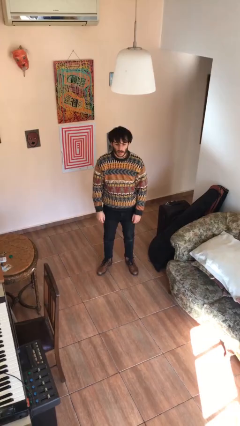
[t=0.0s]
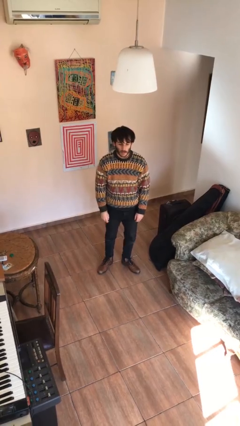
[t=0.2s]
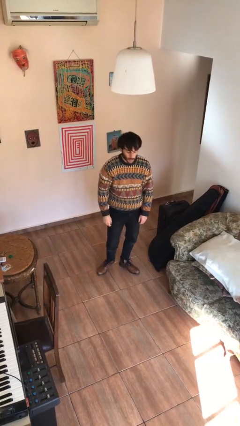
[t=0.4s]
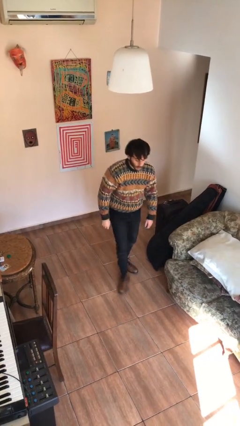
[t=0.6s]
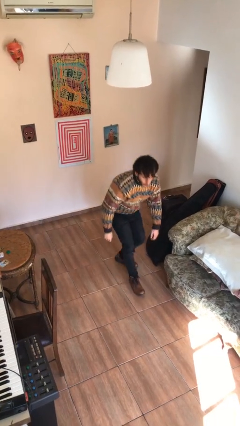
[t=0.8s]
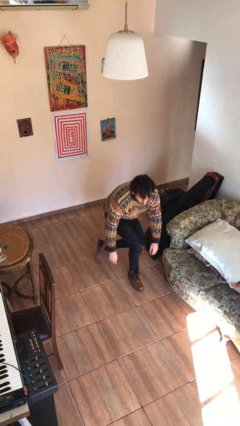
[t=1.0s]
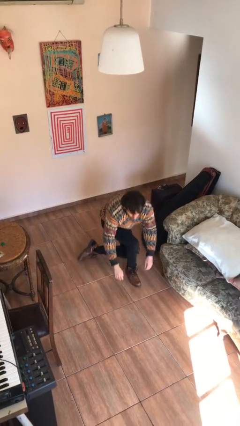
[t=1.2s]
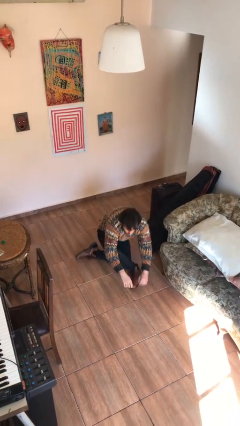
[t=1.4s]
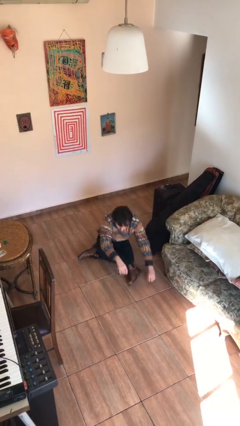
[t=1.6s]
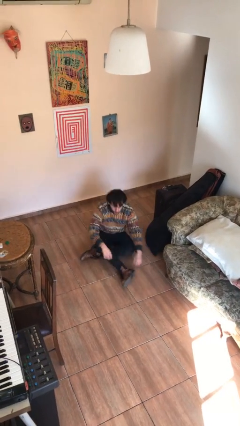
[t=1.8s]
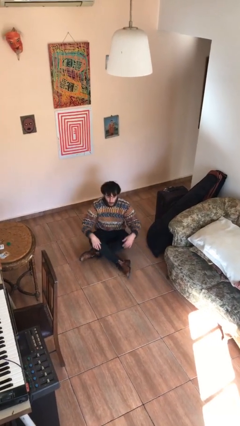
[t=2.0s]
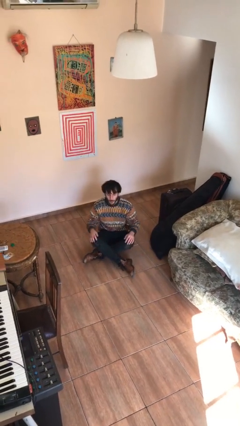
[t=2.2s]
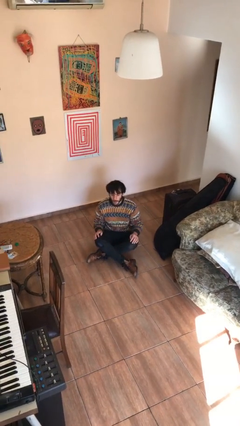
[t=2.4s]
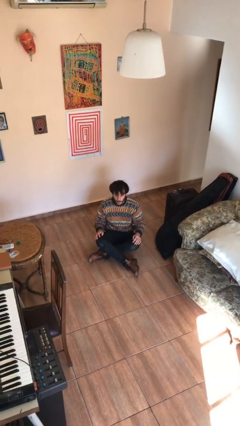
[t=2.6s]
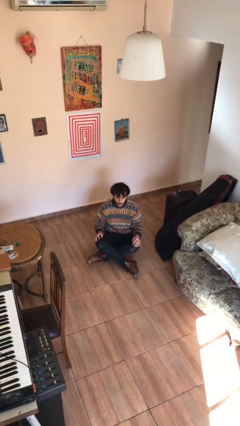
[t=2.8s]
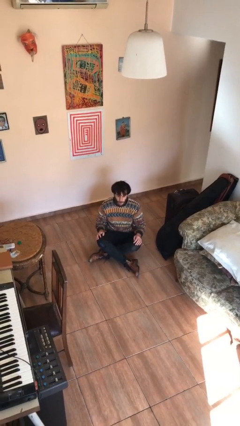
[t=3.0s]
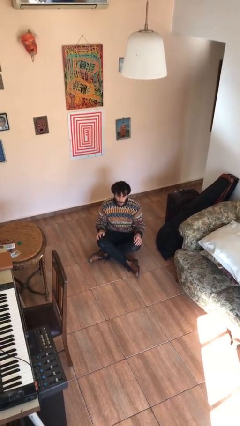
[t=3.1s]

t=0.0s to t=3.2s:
person sits crisscross

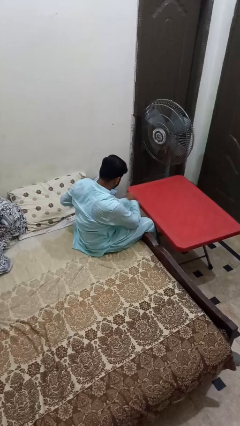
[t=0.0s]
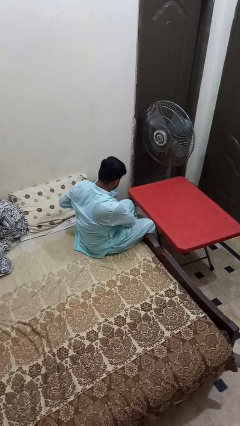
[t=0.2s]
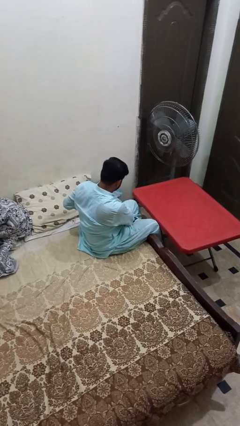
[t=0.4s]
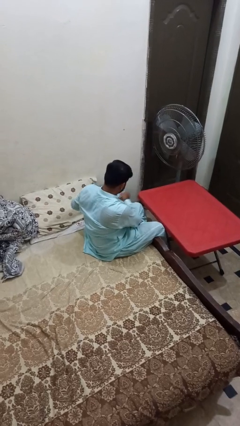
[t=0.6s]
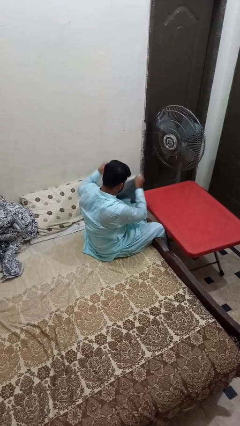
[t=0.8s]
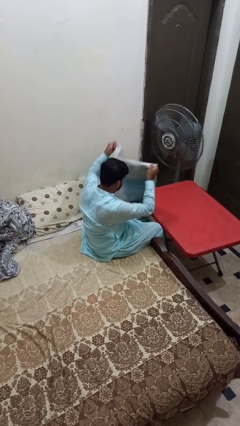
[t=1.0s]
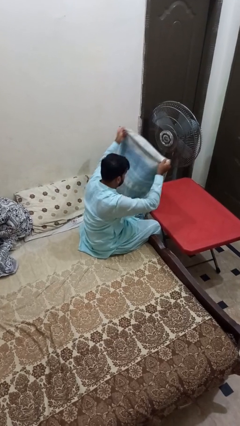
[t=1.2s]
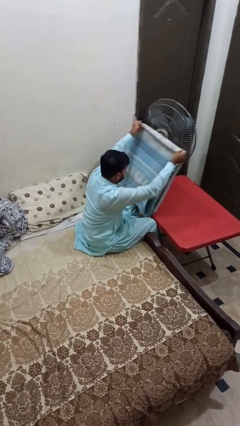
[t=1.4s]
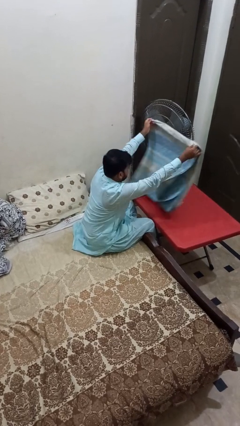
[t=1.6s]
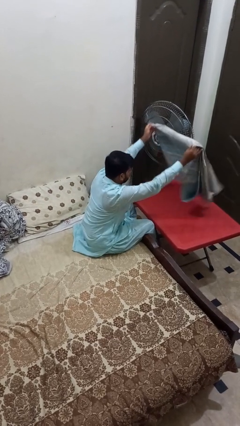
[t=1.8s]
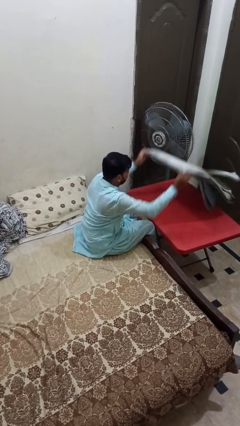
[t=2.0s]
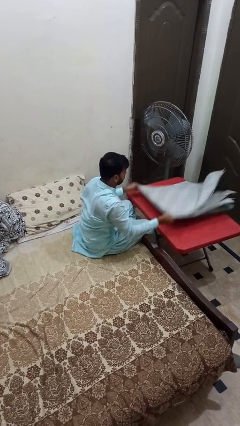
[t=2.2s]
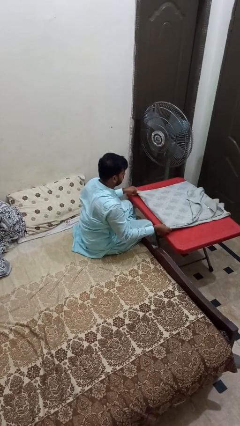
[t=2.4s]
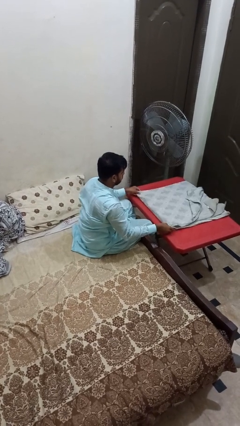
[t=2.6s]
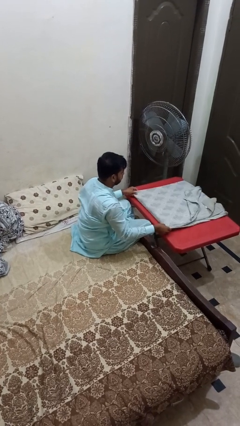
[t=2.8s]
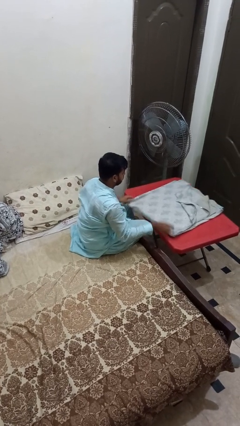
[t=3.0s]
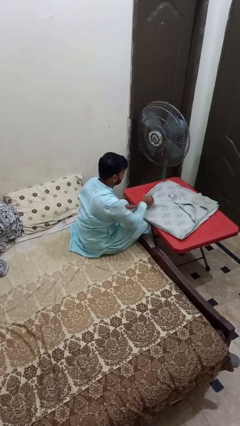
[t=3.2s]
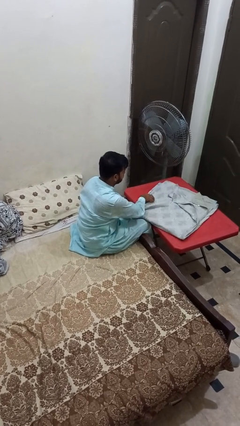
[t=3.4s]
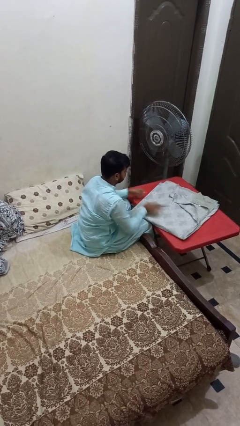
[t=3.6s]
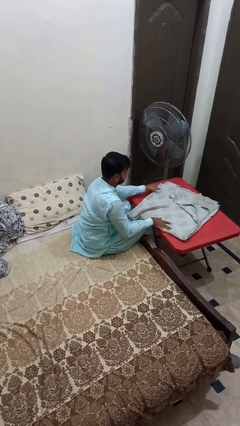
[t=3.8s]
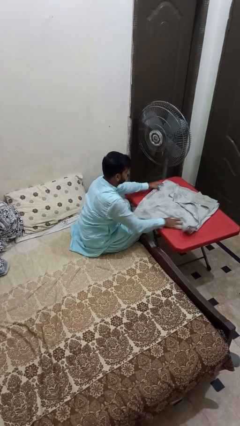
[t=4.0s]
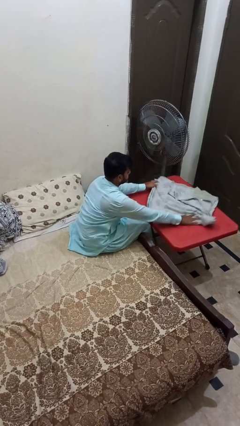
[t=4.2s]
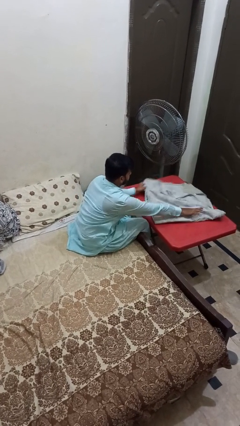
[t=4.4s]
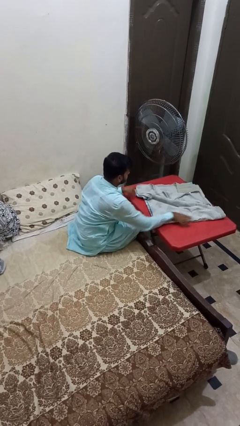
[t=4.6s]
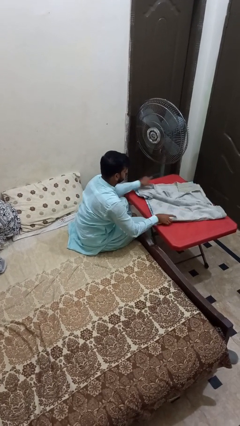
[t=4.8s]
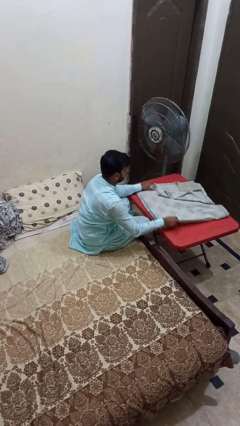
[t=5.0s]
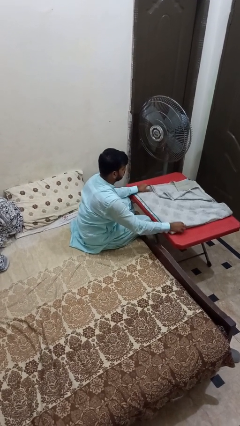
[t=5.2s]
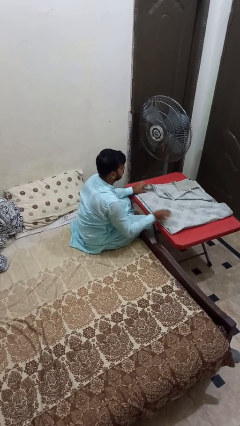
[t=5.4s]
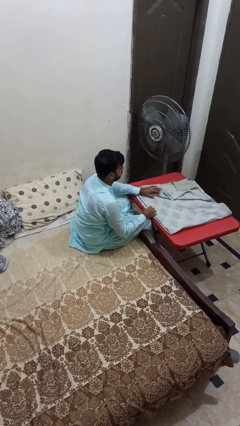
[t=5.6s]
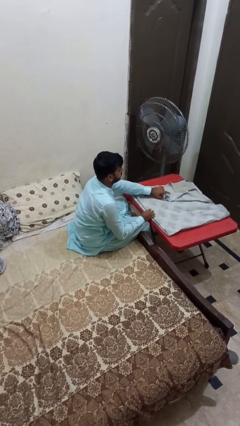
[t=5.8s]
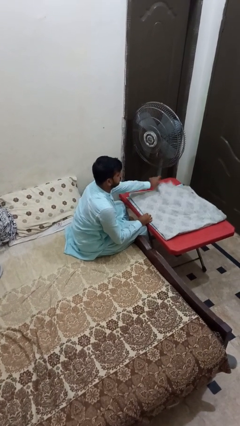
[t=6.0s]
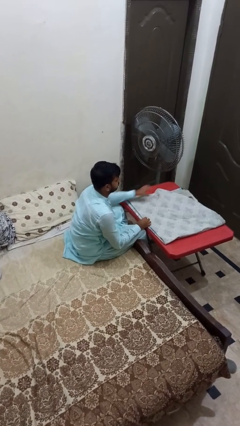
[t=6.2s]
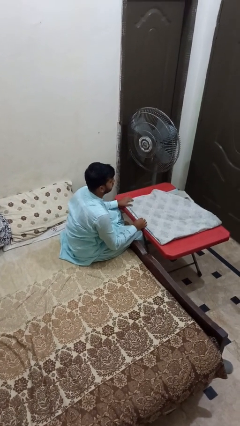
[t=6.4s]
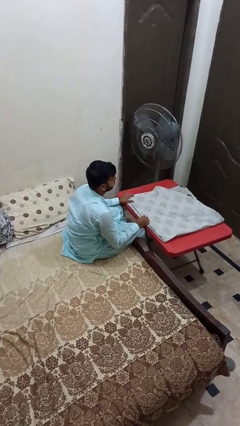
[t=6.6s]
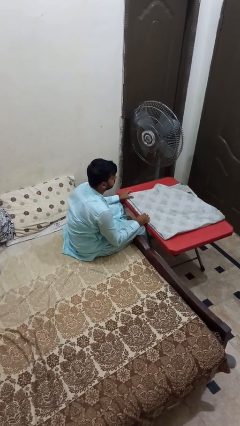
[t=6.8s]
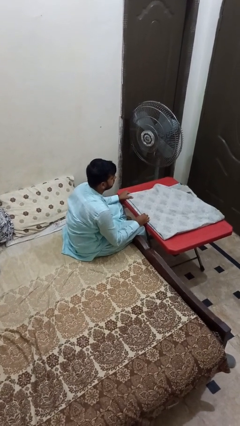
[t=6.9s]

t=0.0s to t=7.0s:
person interacts with tablet

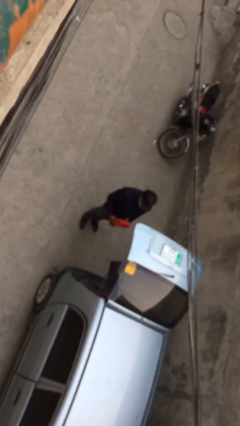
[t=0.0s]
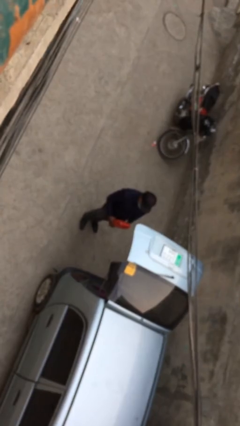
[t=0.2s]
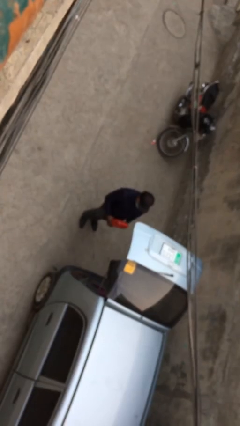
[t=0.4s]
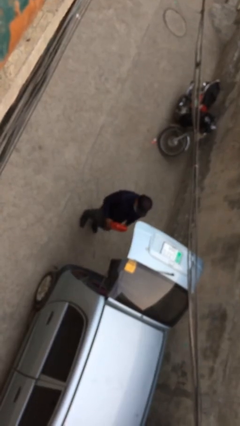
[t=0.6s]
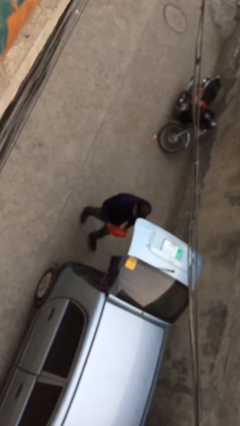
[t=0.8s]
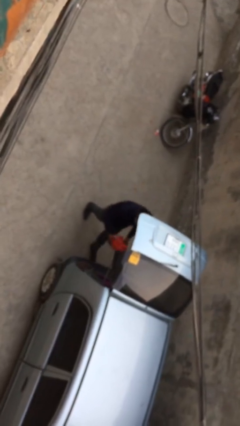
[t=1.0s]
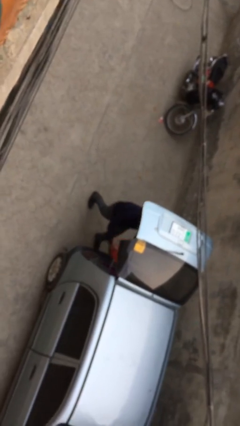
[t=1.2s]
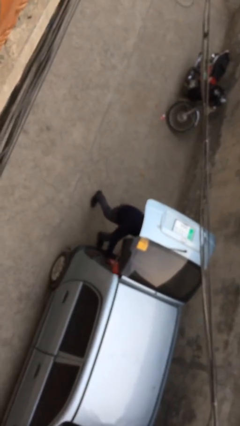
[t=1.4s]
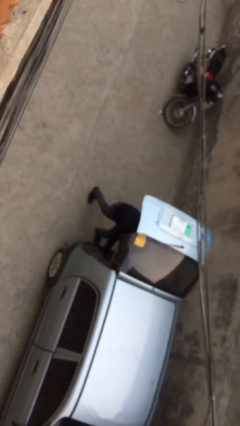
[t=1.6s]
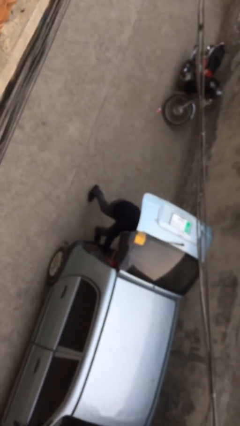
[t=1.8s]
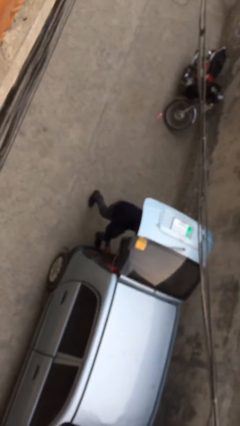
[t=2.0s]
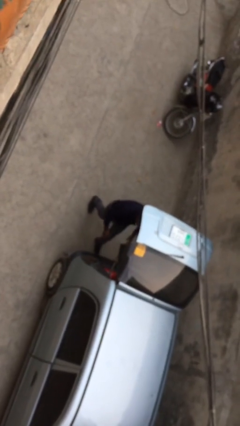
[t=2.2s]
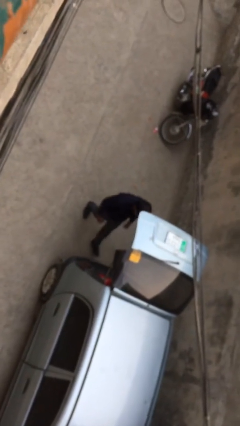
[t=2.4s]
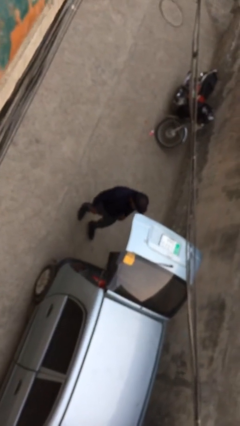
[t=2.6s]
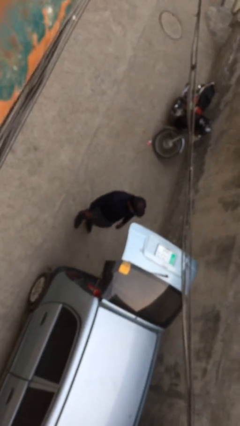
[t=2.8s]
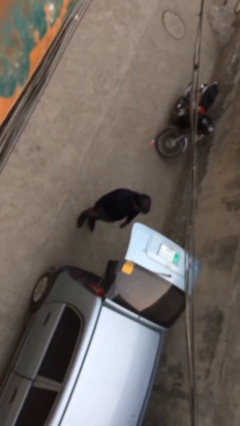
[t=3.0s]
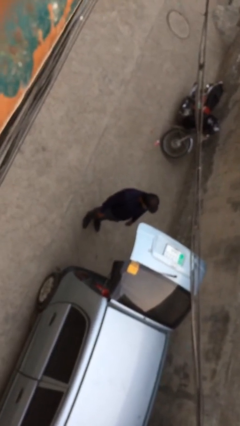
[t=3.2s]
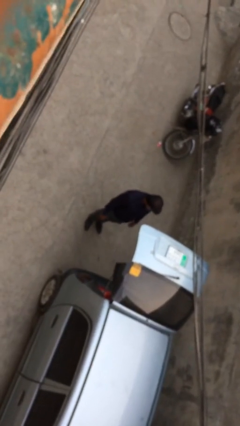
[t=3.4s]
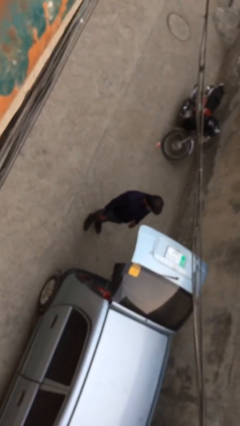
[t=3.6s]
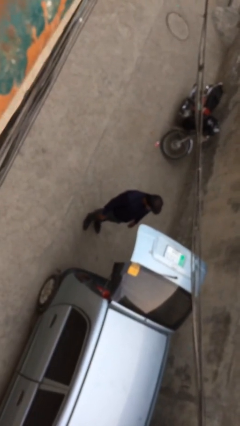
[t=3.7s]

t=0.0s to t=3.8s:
person loads car

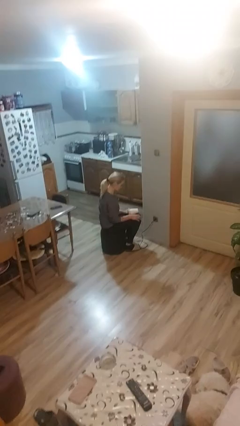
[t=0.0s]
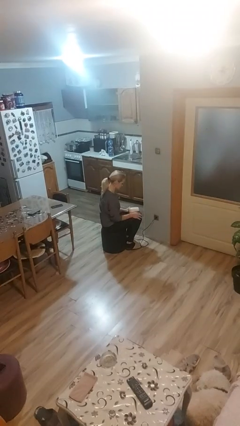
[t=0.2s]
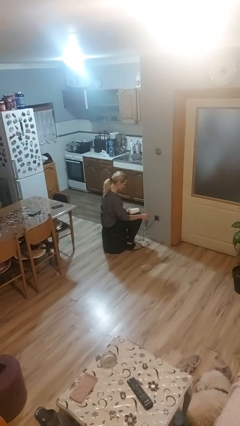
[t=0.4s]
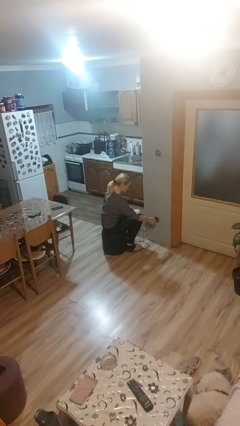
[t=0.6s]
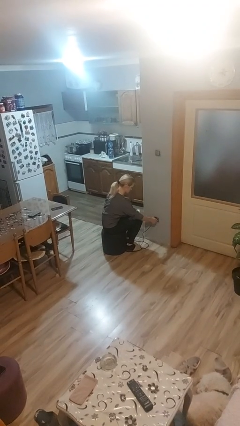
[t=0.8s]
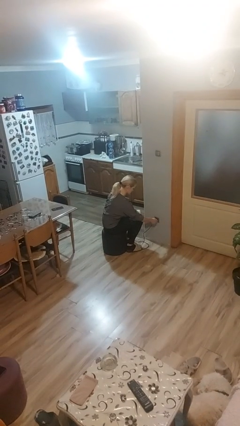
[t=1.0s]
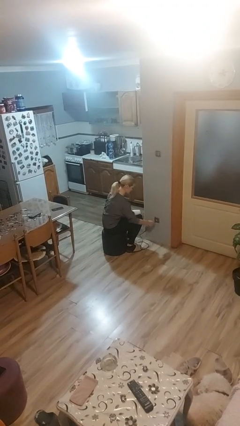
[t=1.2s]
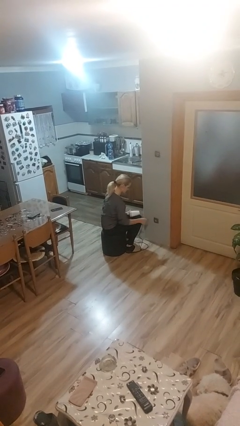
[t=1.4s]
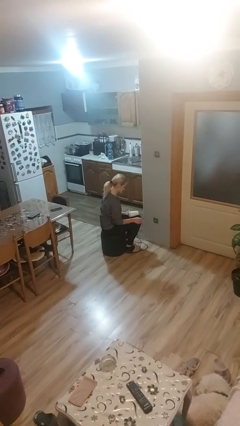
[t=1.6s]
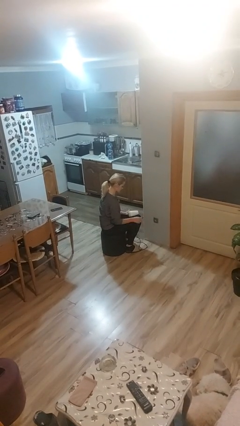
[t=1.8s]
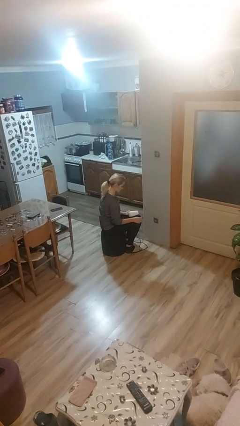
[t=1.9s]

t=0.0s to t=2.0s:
person unplugs from electrical socket

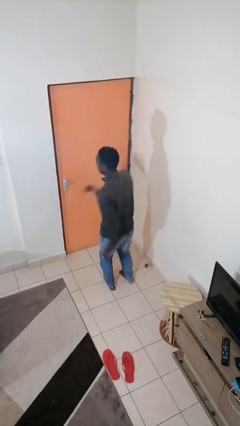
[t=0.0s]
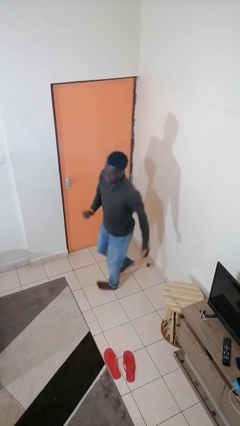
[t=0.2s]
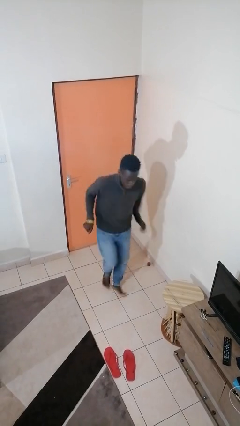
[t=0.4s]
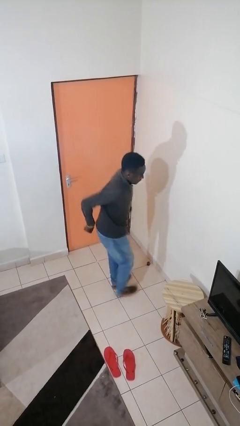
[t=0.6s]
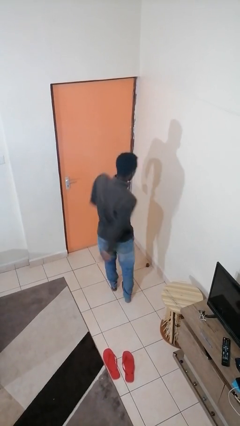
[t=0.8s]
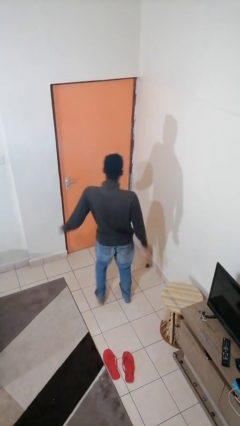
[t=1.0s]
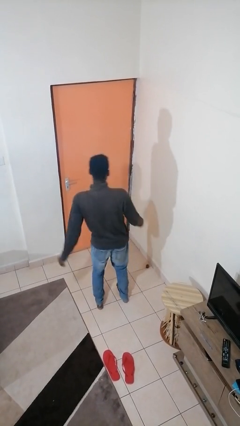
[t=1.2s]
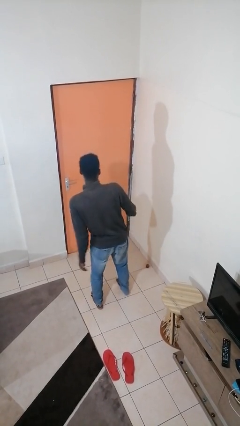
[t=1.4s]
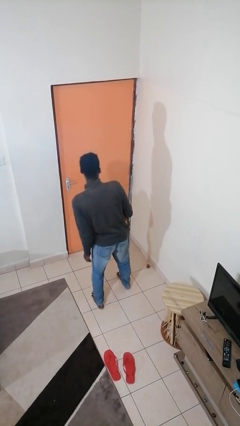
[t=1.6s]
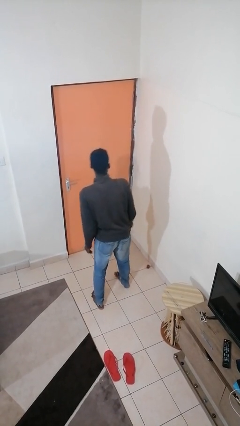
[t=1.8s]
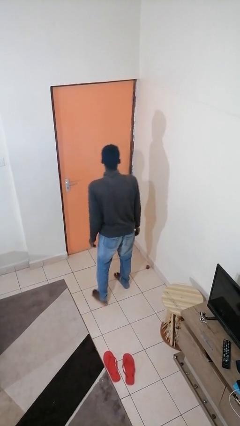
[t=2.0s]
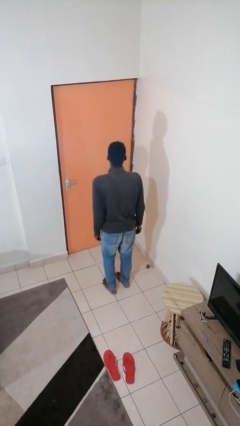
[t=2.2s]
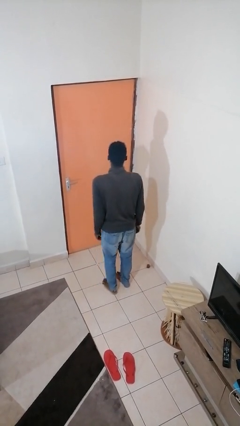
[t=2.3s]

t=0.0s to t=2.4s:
person twirls
